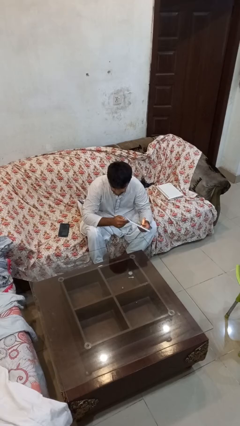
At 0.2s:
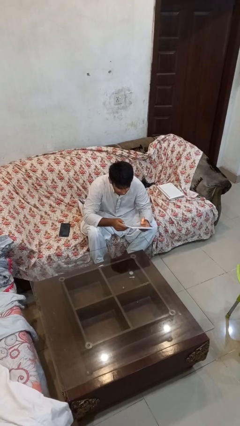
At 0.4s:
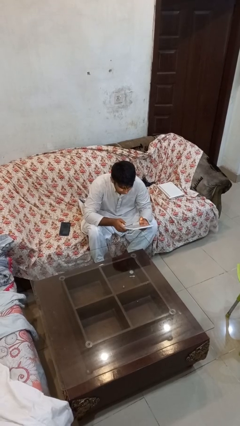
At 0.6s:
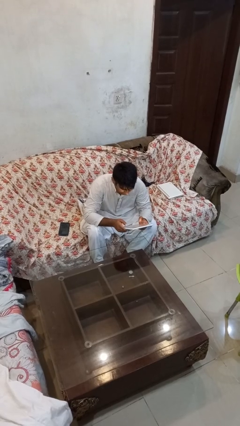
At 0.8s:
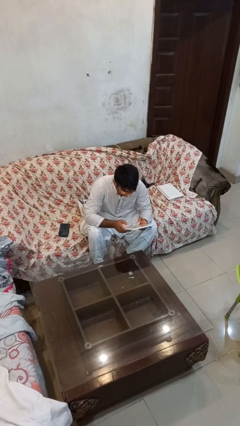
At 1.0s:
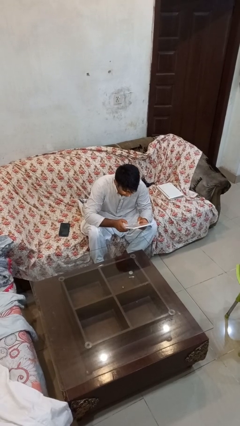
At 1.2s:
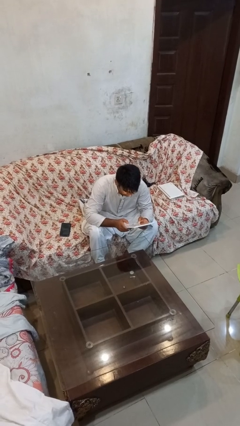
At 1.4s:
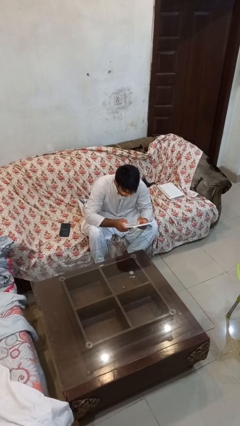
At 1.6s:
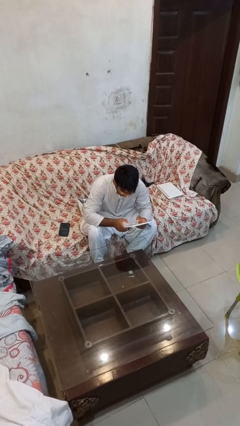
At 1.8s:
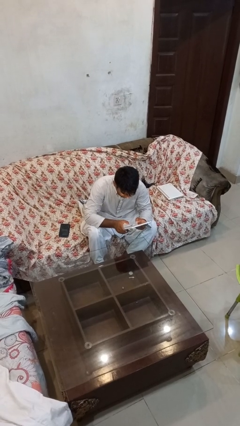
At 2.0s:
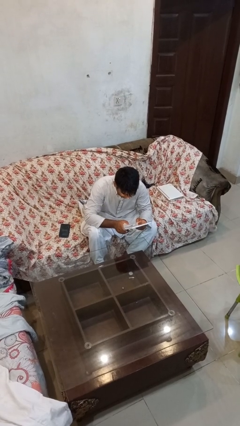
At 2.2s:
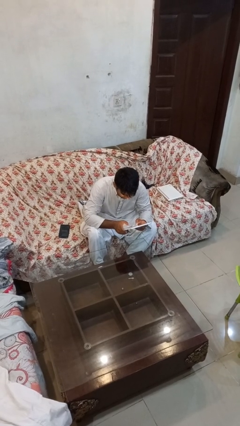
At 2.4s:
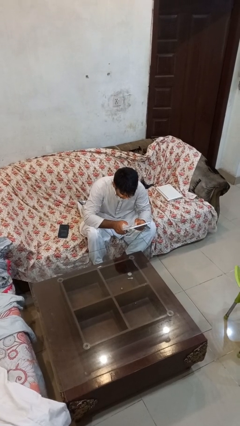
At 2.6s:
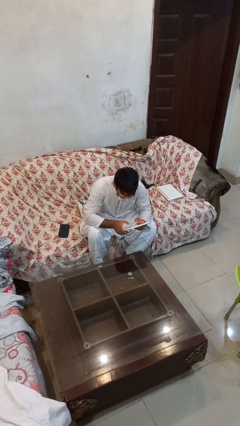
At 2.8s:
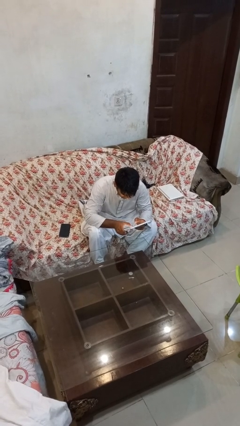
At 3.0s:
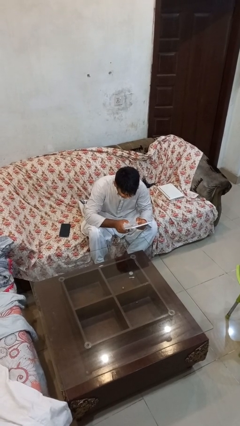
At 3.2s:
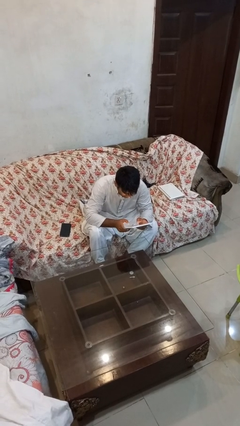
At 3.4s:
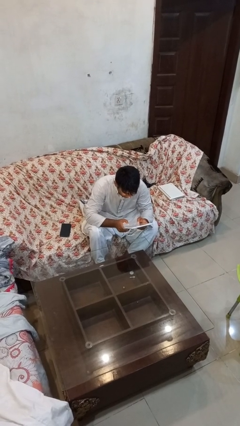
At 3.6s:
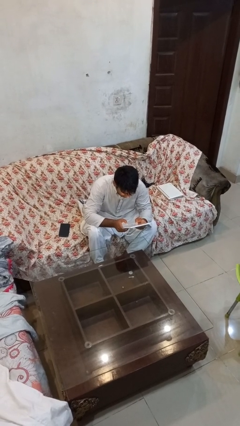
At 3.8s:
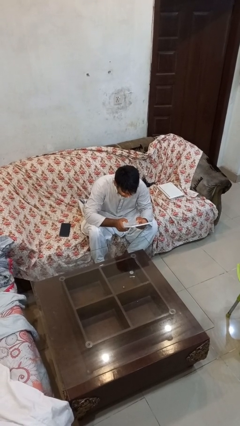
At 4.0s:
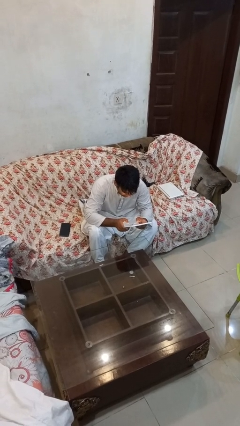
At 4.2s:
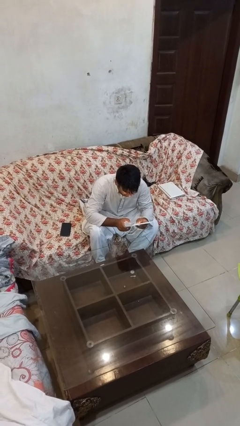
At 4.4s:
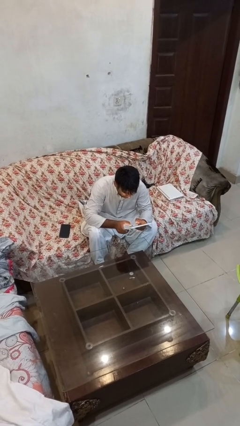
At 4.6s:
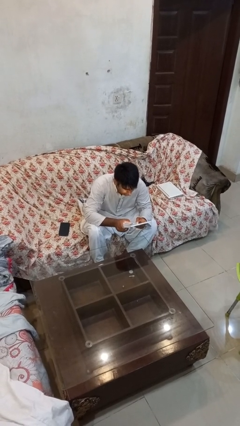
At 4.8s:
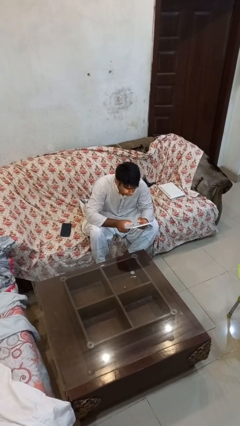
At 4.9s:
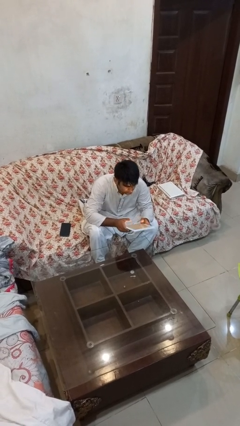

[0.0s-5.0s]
person interacts with tablet

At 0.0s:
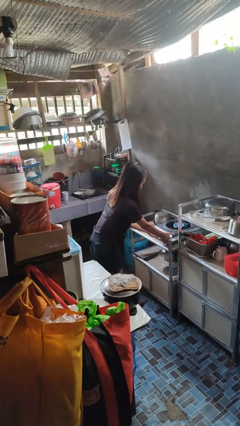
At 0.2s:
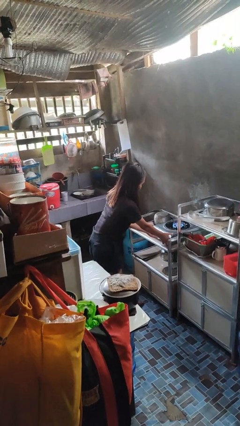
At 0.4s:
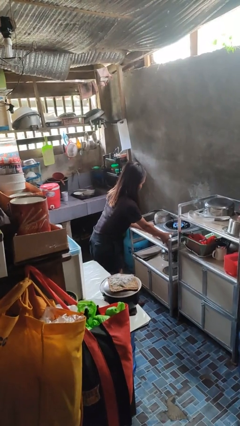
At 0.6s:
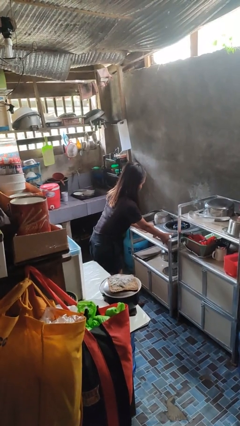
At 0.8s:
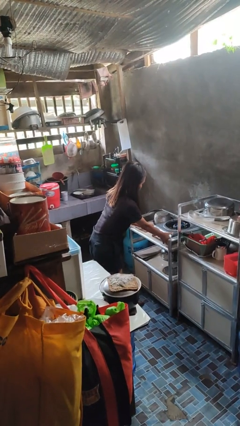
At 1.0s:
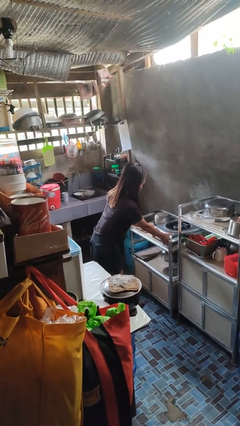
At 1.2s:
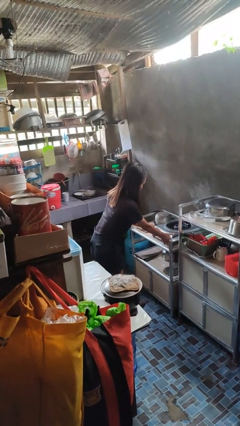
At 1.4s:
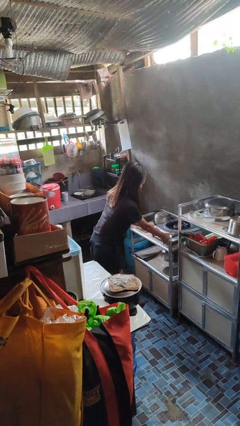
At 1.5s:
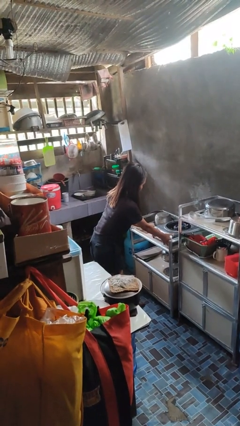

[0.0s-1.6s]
person turns off stovetop

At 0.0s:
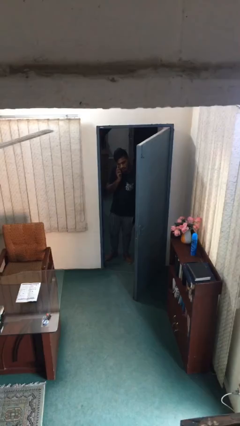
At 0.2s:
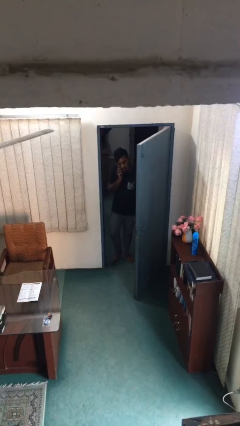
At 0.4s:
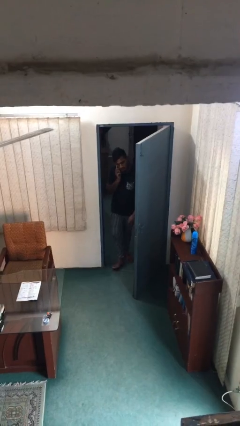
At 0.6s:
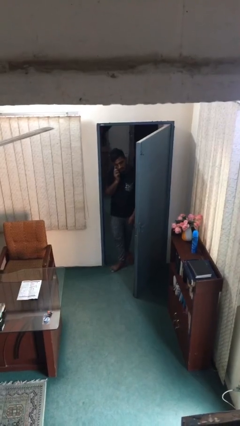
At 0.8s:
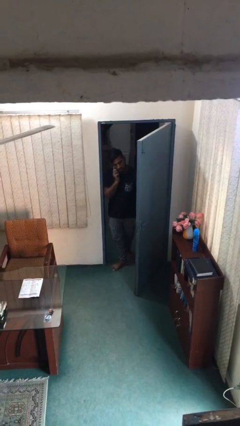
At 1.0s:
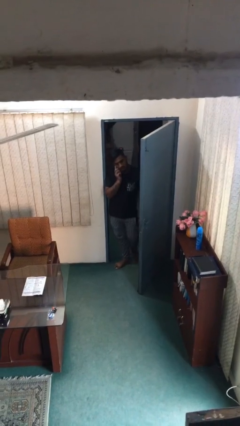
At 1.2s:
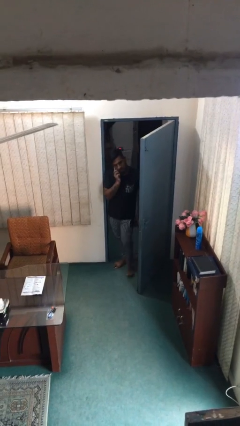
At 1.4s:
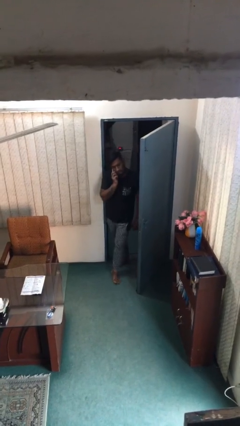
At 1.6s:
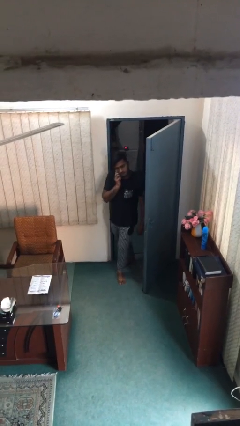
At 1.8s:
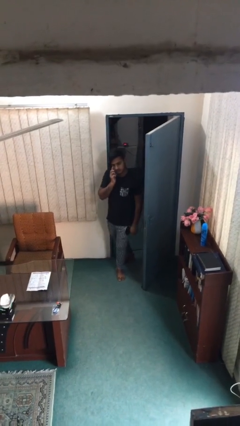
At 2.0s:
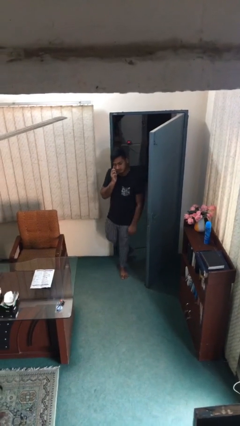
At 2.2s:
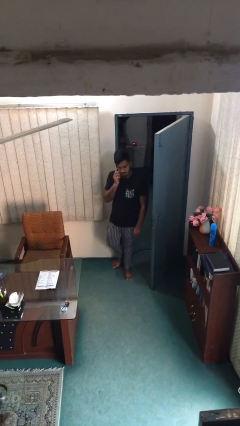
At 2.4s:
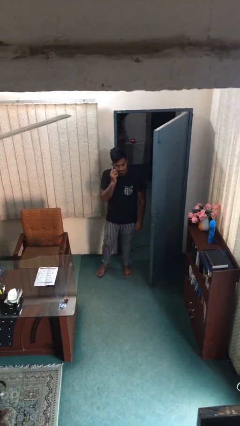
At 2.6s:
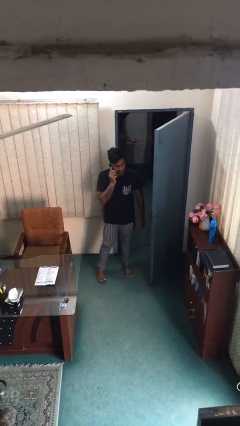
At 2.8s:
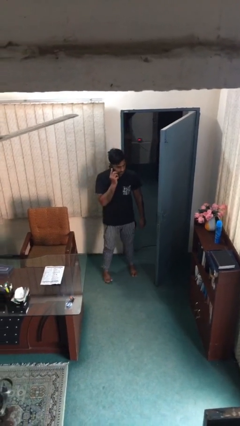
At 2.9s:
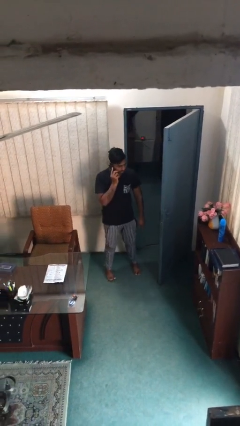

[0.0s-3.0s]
person enters scene through structure

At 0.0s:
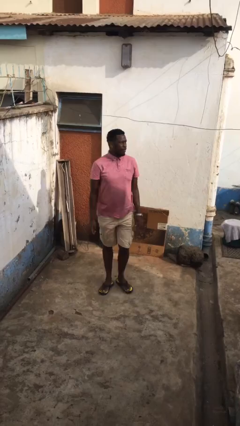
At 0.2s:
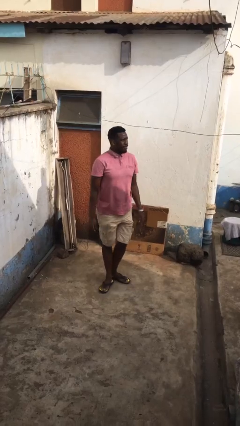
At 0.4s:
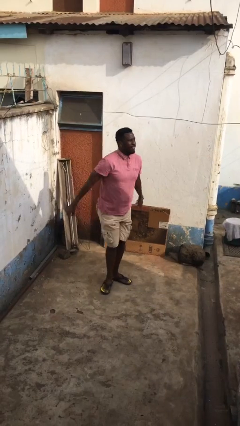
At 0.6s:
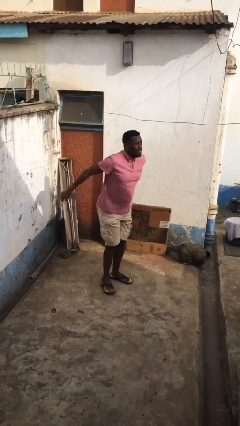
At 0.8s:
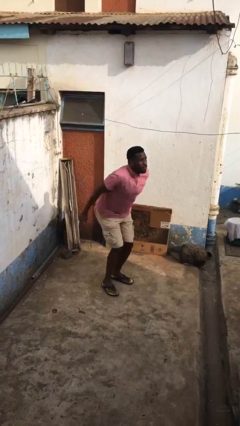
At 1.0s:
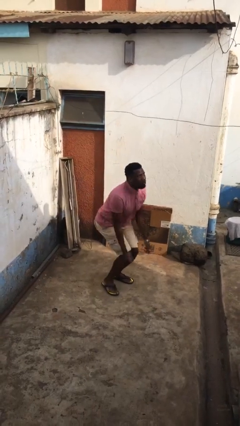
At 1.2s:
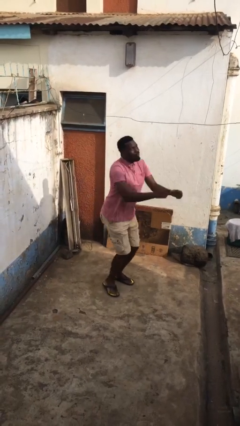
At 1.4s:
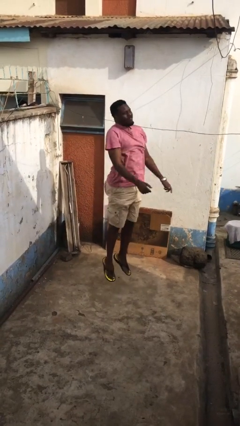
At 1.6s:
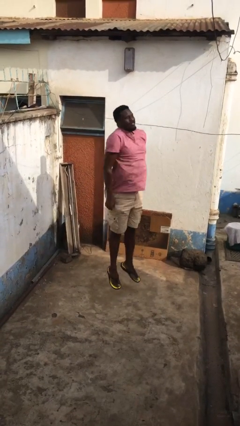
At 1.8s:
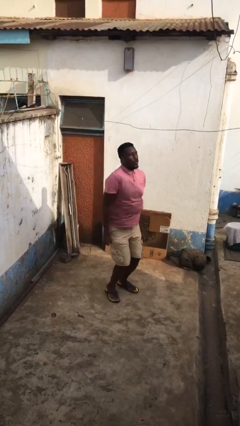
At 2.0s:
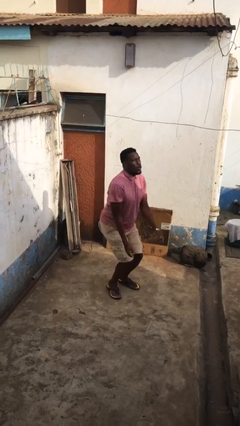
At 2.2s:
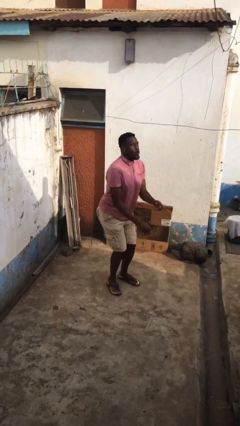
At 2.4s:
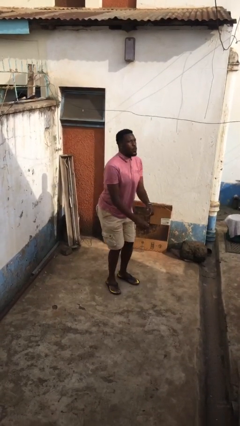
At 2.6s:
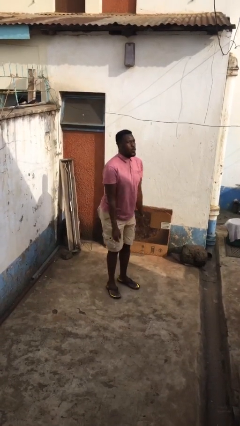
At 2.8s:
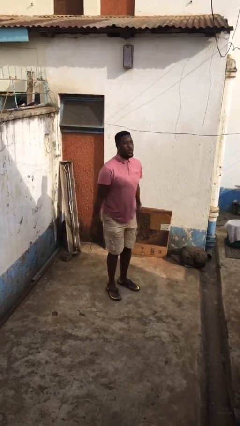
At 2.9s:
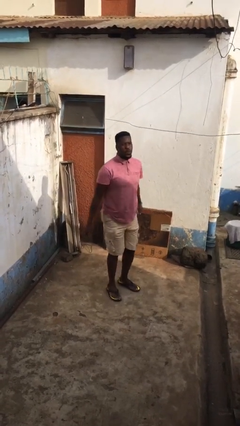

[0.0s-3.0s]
person jumps

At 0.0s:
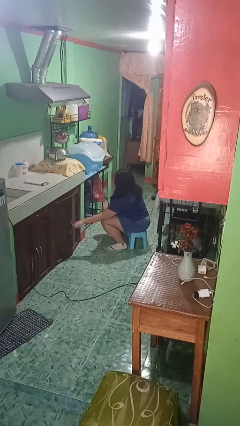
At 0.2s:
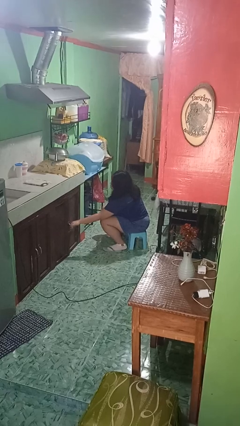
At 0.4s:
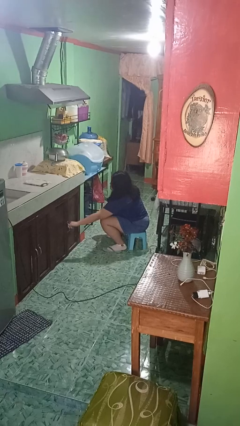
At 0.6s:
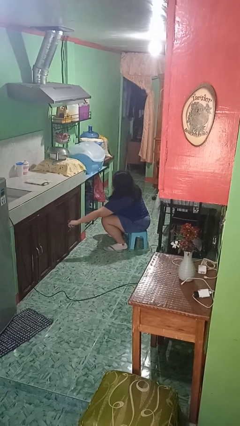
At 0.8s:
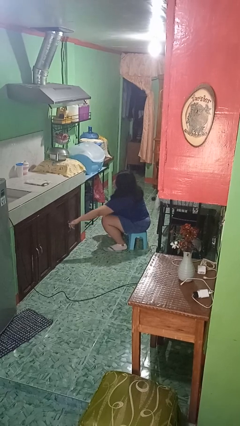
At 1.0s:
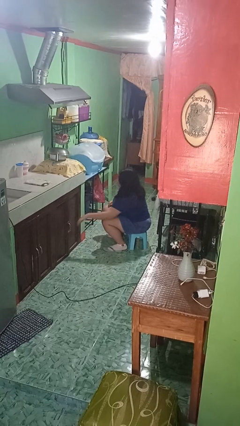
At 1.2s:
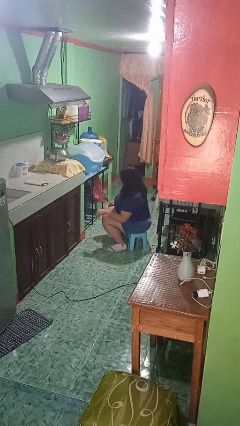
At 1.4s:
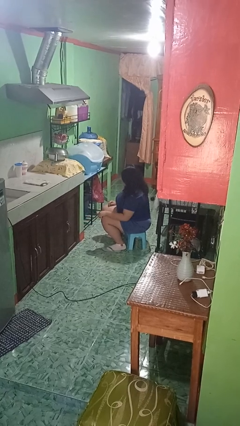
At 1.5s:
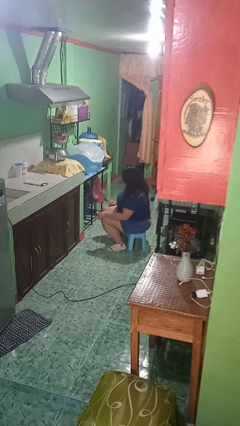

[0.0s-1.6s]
person closes cabinet

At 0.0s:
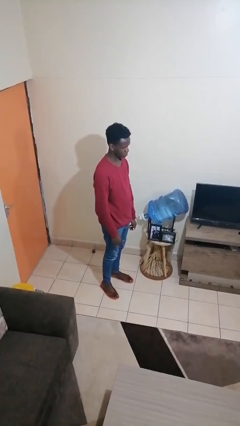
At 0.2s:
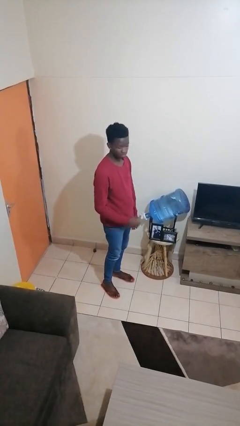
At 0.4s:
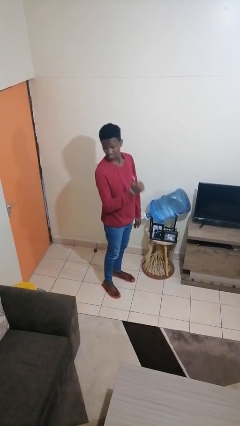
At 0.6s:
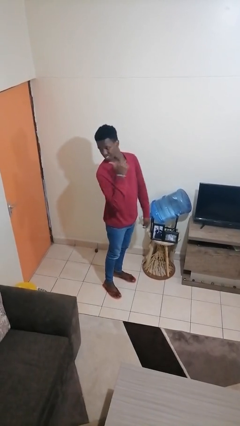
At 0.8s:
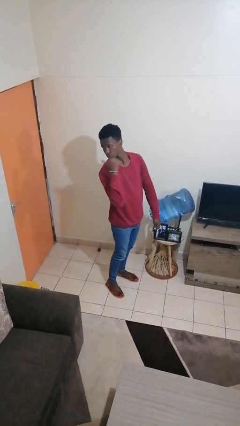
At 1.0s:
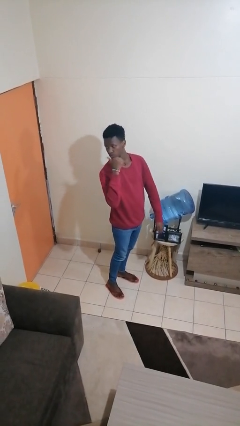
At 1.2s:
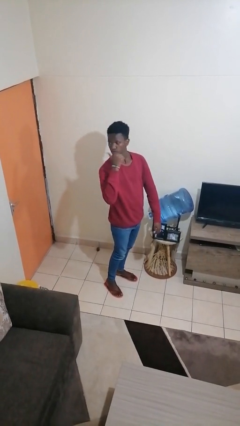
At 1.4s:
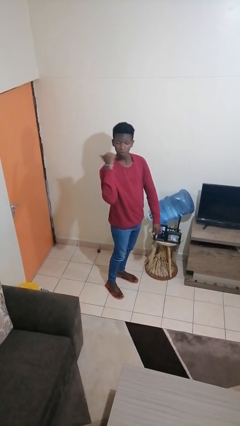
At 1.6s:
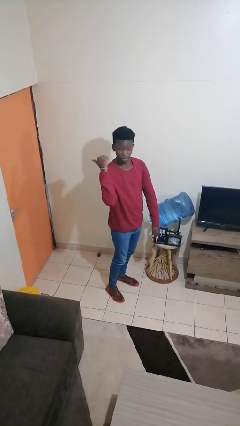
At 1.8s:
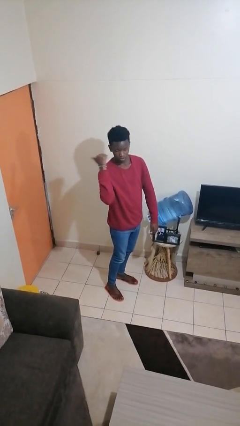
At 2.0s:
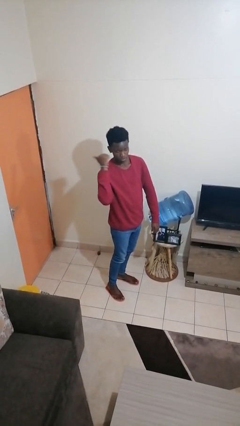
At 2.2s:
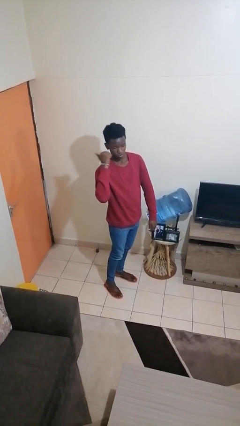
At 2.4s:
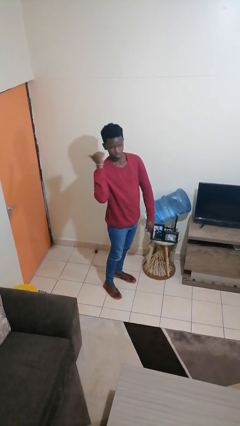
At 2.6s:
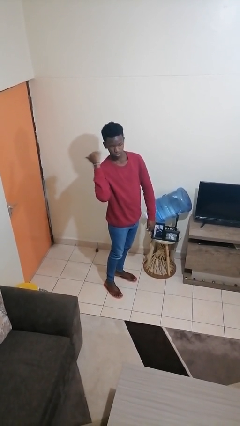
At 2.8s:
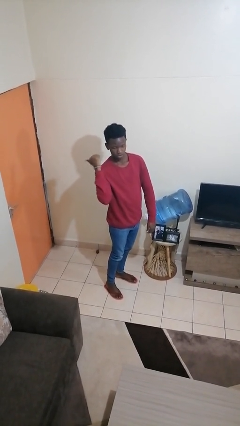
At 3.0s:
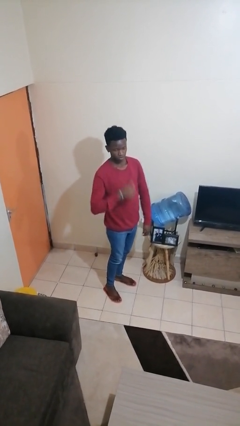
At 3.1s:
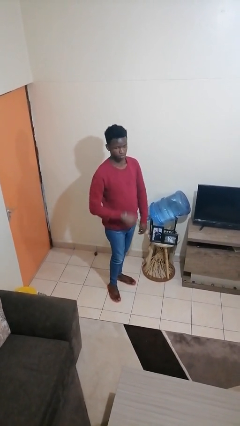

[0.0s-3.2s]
person gestures behind me
